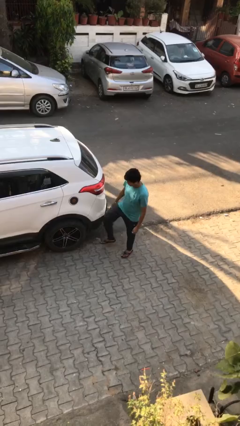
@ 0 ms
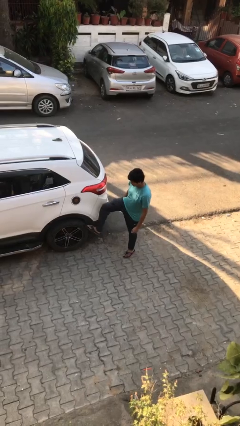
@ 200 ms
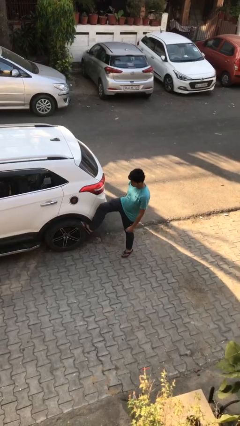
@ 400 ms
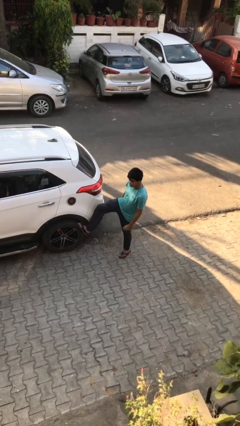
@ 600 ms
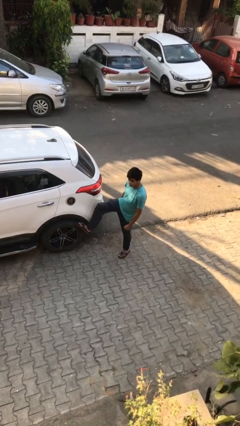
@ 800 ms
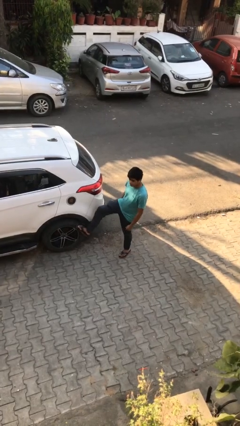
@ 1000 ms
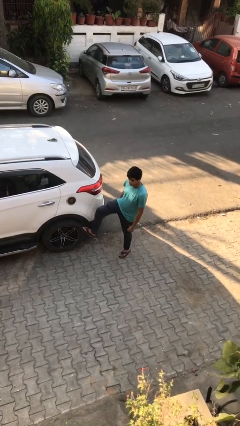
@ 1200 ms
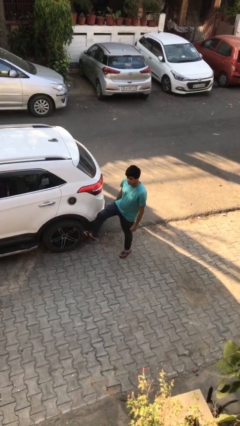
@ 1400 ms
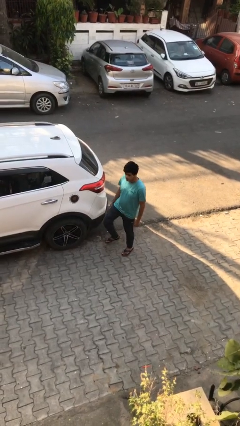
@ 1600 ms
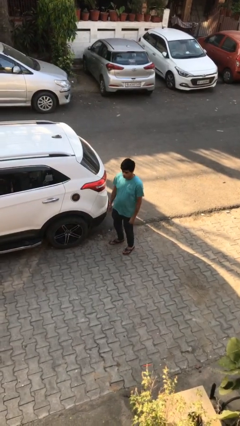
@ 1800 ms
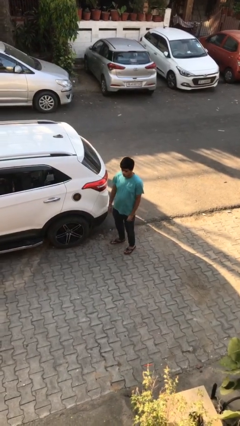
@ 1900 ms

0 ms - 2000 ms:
person kicks car tires

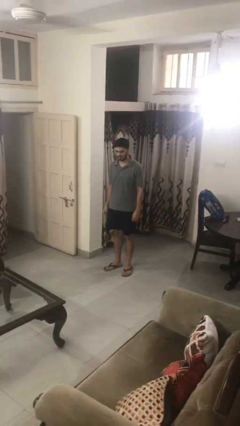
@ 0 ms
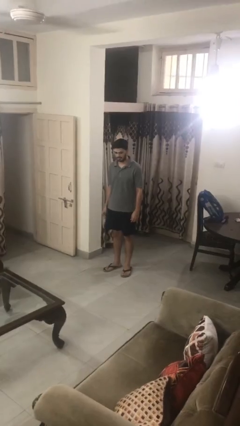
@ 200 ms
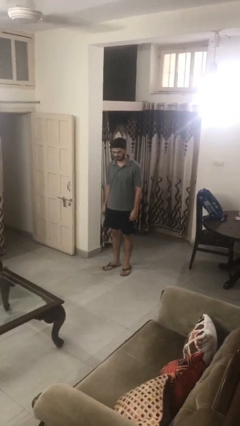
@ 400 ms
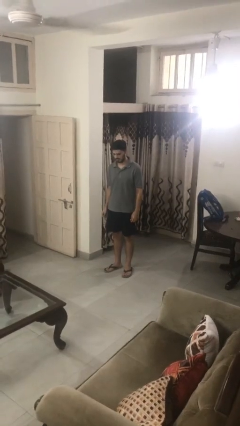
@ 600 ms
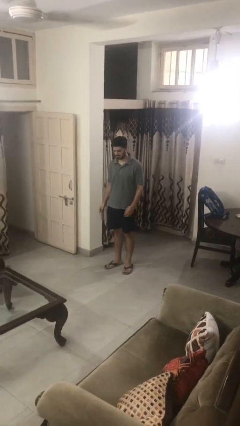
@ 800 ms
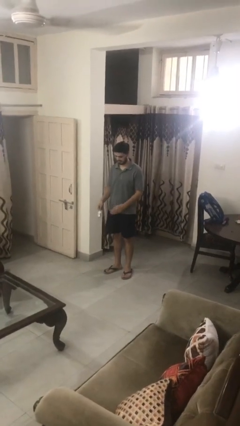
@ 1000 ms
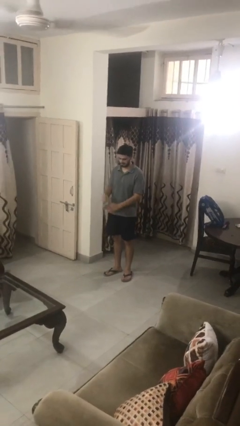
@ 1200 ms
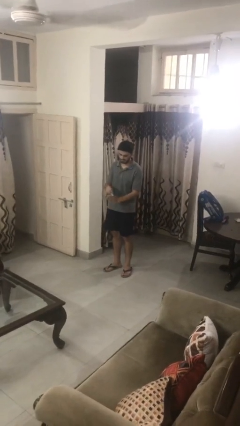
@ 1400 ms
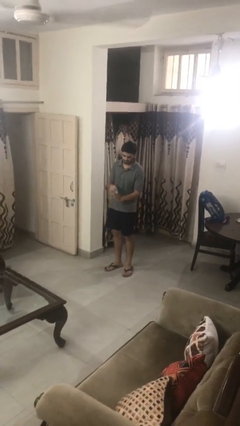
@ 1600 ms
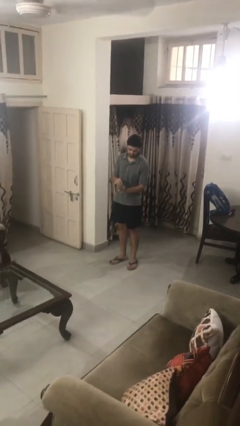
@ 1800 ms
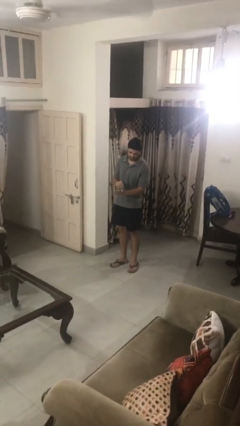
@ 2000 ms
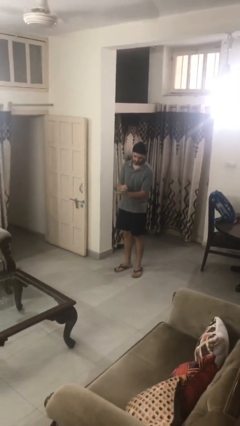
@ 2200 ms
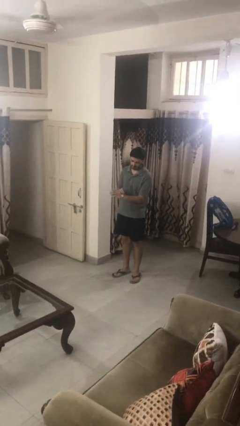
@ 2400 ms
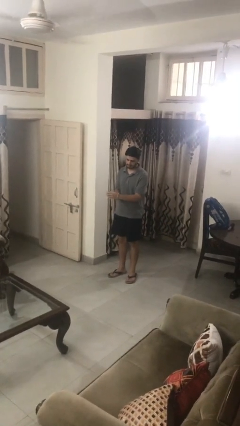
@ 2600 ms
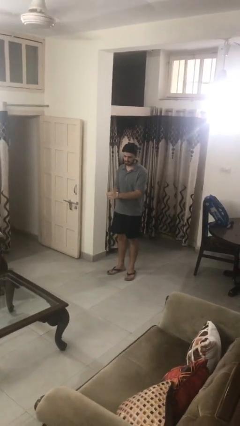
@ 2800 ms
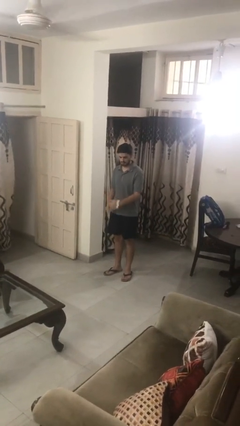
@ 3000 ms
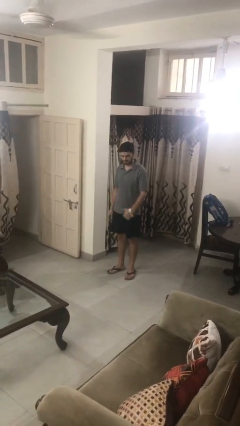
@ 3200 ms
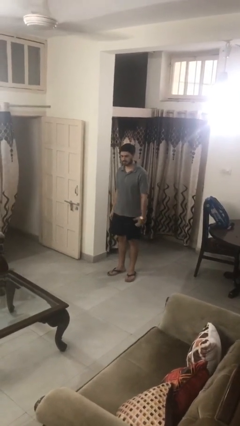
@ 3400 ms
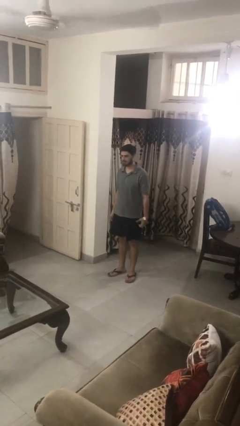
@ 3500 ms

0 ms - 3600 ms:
person puts on wristwatch

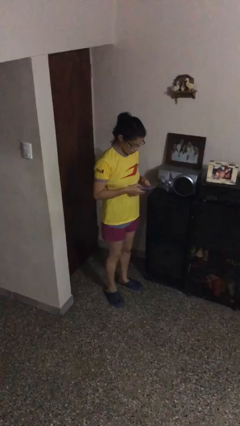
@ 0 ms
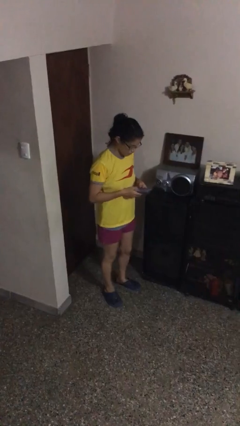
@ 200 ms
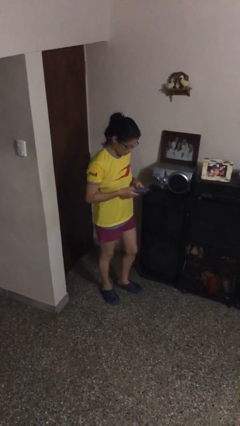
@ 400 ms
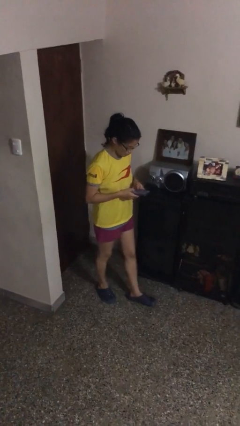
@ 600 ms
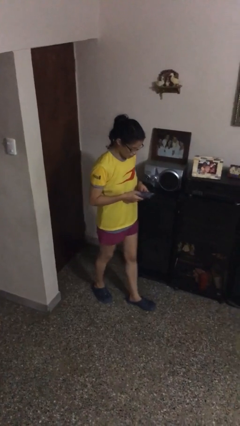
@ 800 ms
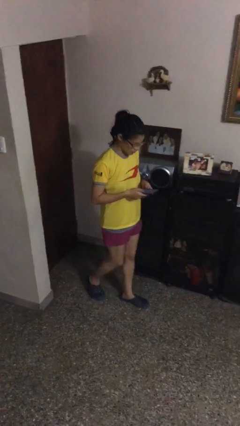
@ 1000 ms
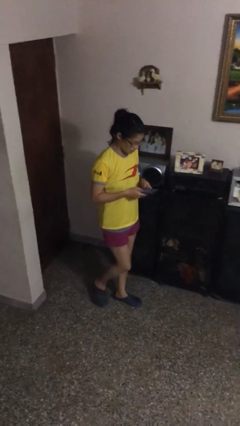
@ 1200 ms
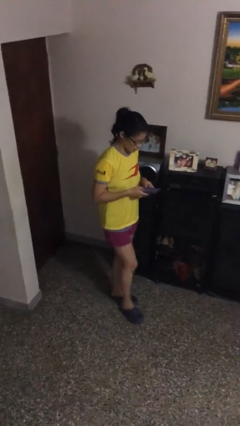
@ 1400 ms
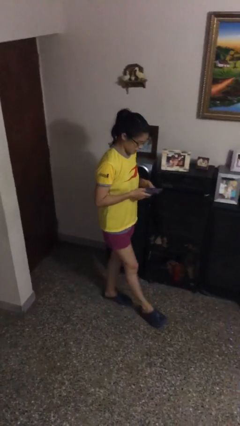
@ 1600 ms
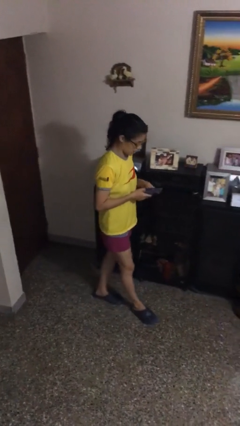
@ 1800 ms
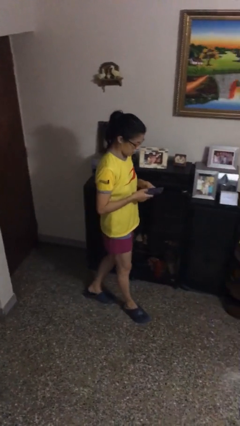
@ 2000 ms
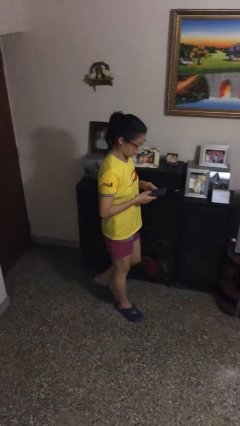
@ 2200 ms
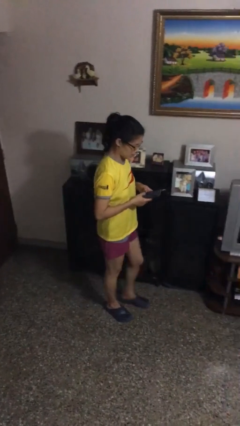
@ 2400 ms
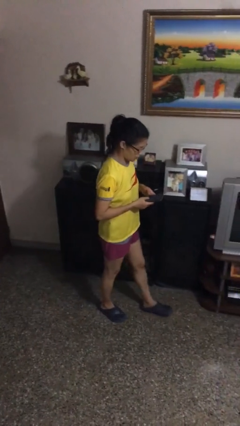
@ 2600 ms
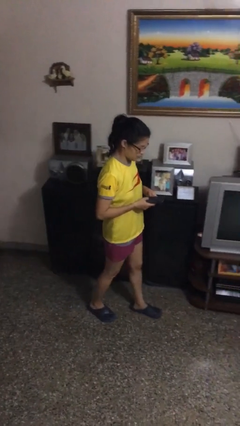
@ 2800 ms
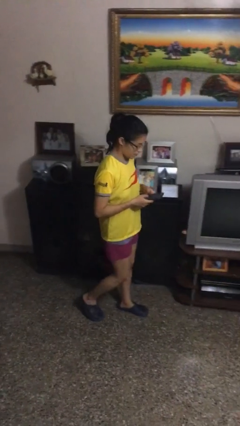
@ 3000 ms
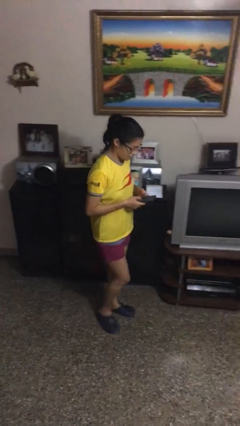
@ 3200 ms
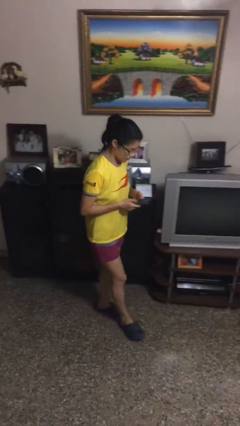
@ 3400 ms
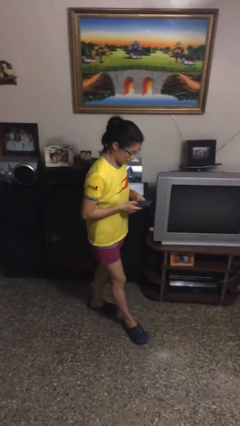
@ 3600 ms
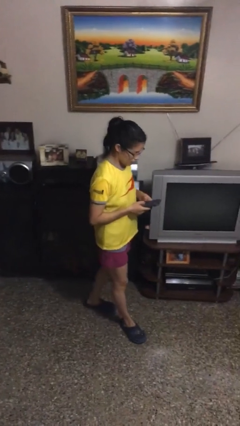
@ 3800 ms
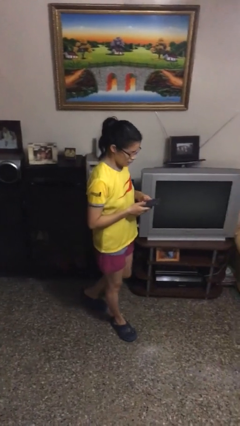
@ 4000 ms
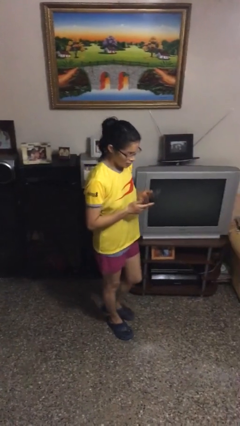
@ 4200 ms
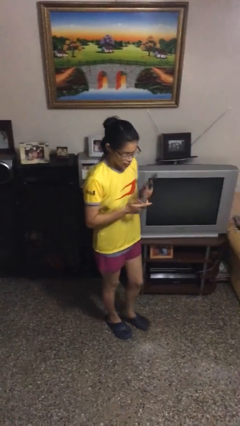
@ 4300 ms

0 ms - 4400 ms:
person texts on phone

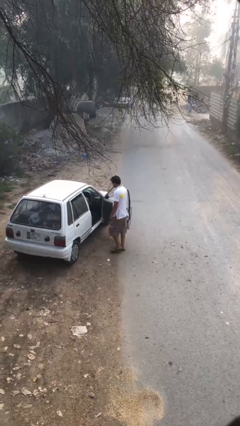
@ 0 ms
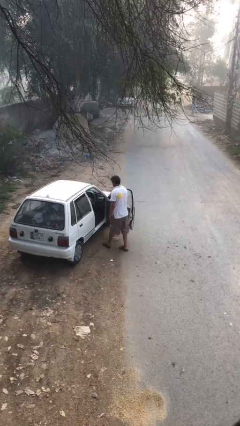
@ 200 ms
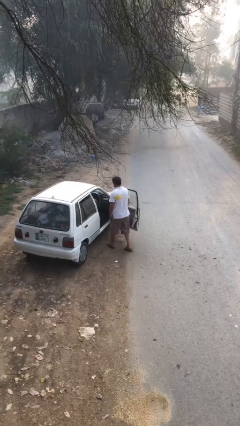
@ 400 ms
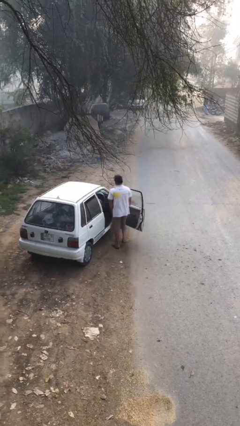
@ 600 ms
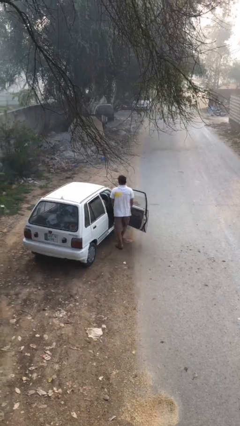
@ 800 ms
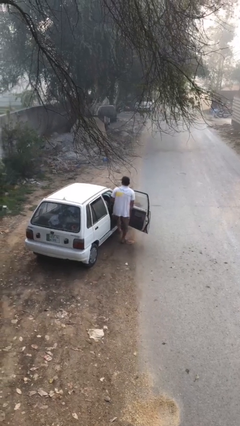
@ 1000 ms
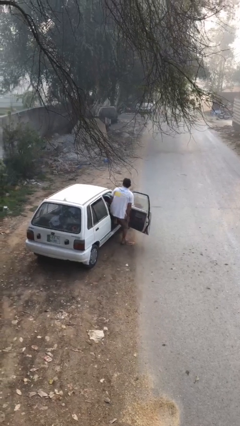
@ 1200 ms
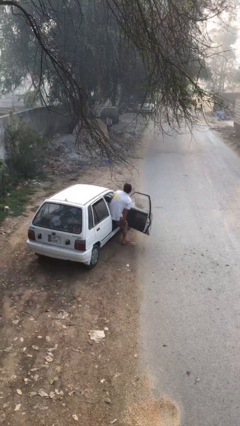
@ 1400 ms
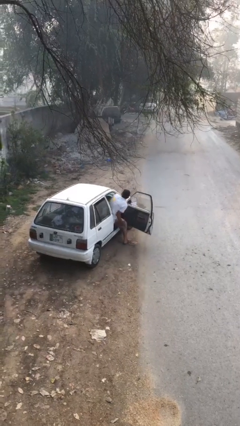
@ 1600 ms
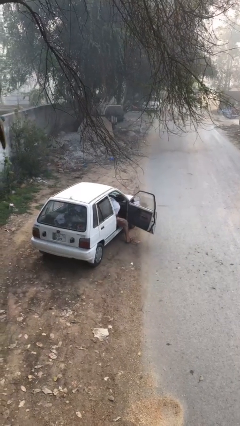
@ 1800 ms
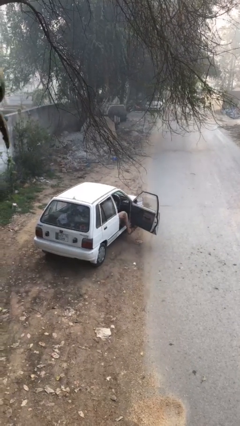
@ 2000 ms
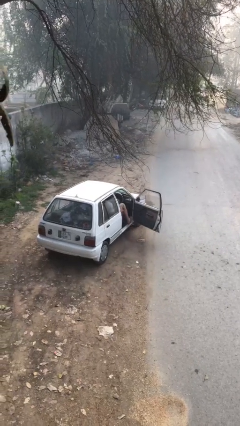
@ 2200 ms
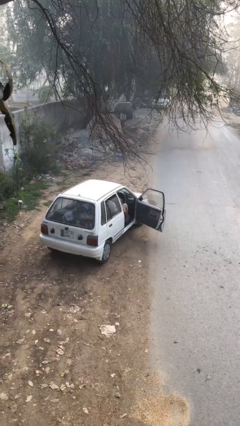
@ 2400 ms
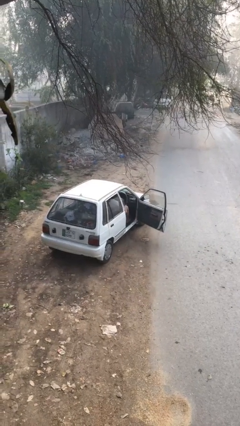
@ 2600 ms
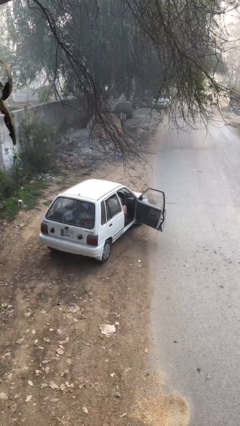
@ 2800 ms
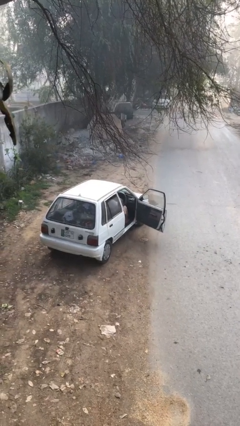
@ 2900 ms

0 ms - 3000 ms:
person enters car

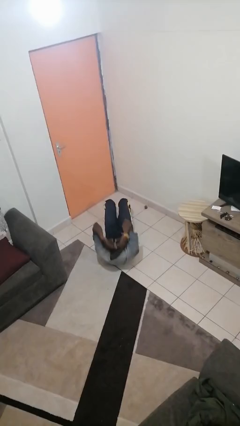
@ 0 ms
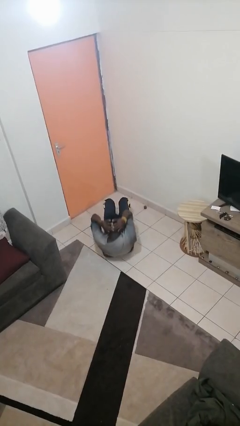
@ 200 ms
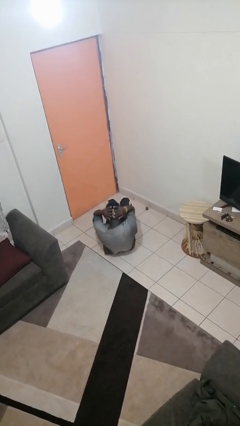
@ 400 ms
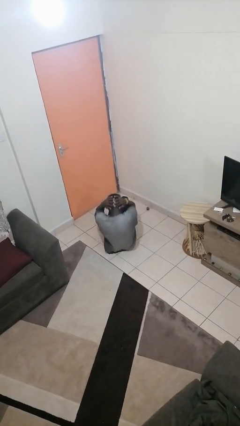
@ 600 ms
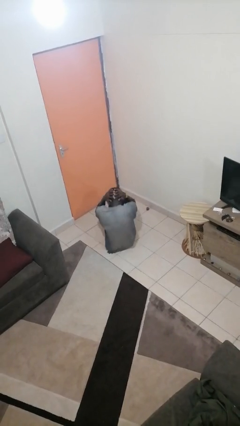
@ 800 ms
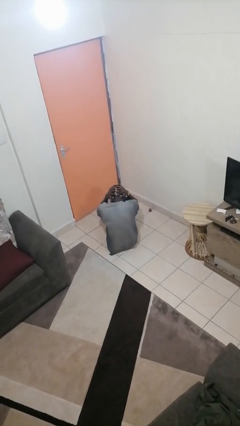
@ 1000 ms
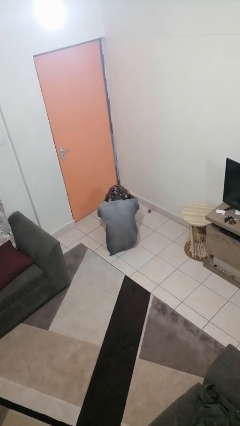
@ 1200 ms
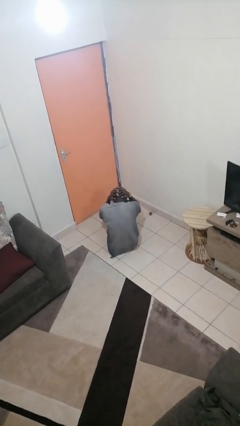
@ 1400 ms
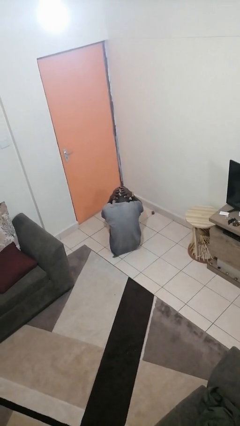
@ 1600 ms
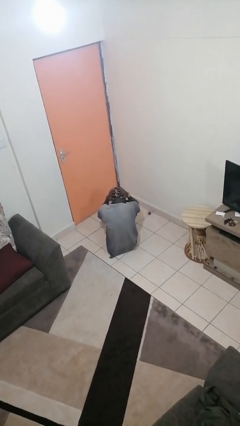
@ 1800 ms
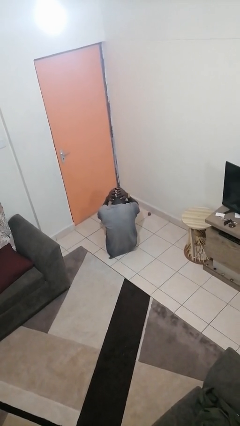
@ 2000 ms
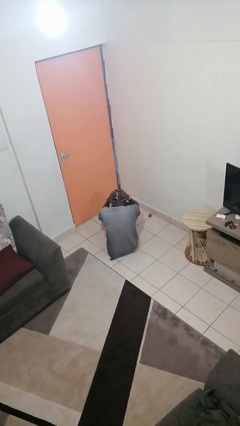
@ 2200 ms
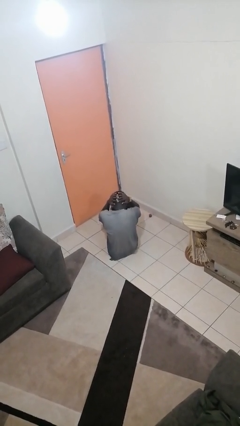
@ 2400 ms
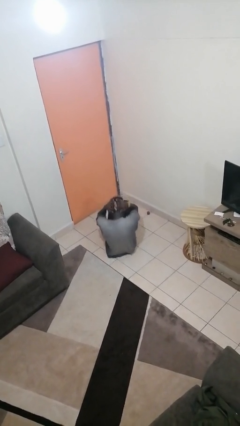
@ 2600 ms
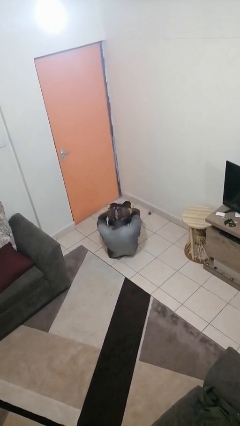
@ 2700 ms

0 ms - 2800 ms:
person exercises with situp

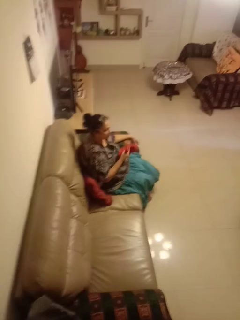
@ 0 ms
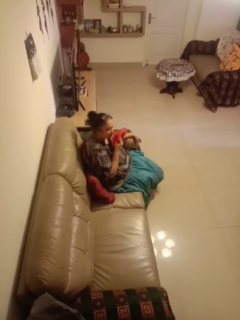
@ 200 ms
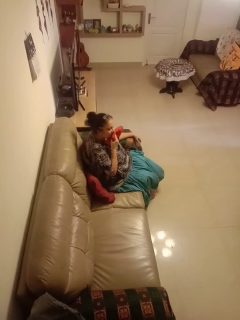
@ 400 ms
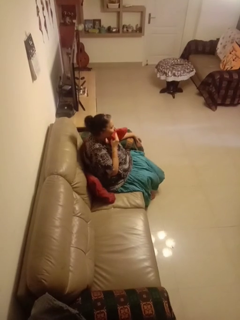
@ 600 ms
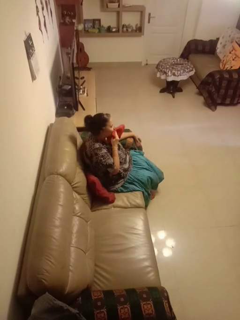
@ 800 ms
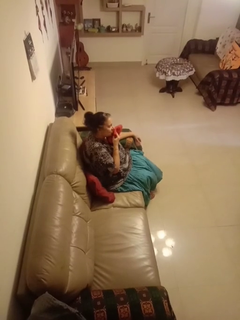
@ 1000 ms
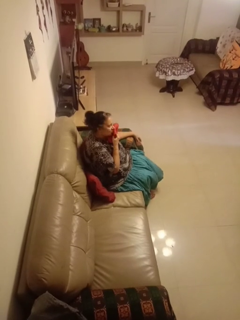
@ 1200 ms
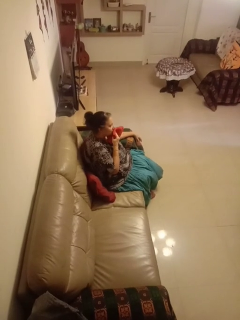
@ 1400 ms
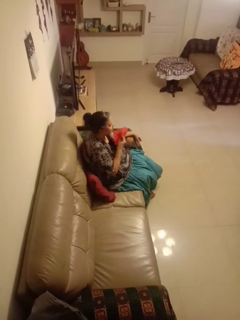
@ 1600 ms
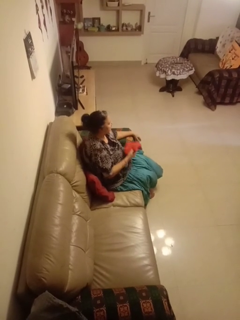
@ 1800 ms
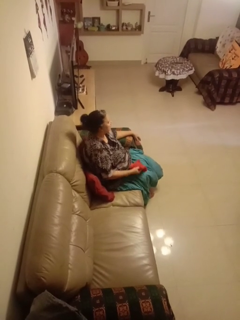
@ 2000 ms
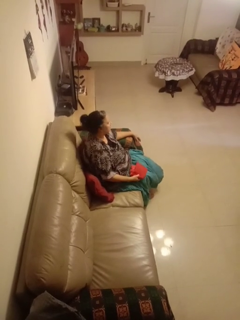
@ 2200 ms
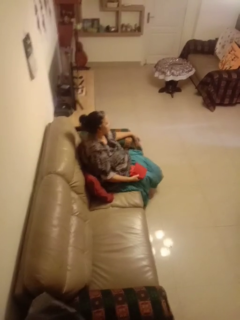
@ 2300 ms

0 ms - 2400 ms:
person wipes mouth with napkin
